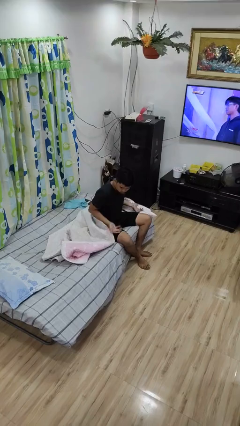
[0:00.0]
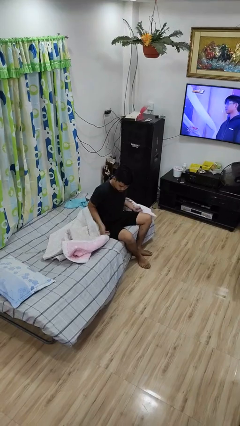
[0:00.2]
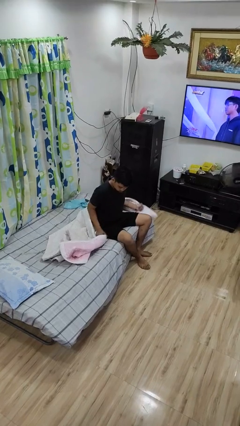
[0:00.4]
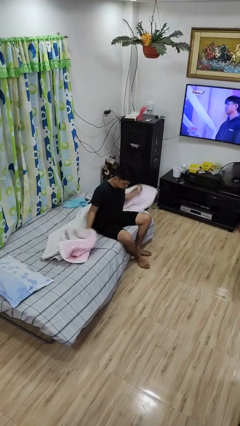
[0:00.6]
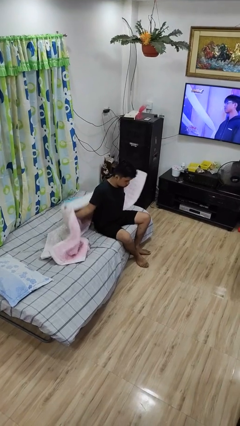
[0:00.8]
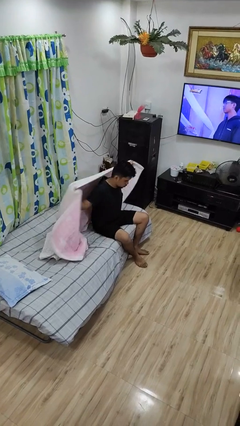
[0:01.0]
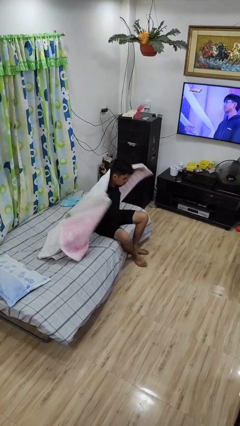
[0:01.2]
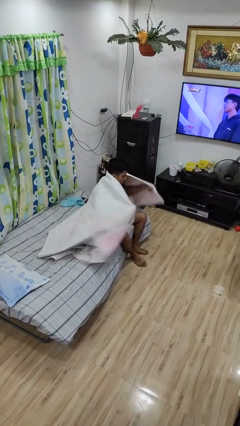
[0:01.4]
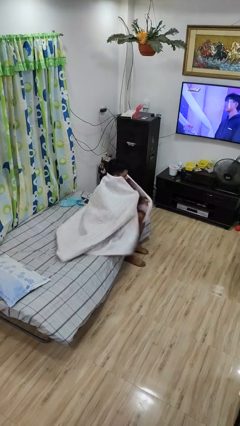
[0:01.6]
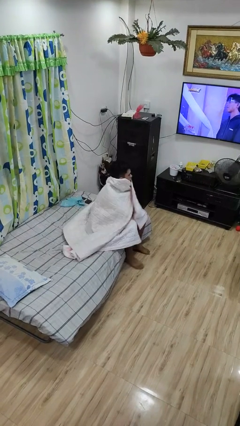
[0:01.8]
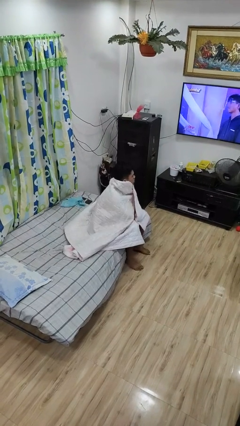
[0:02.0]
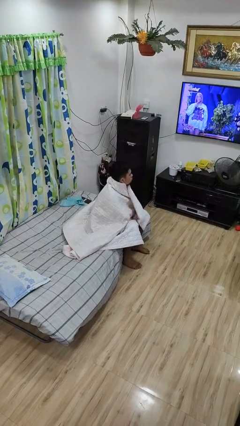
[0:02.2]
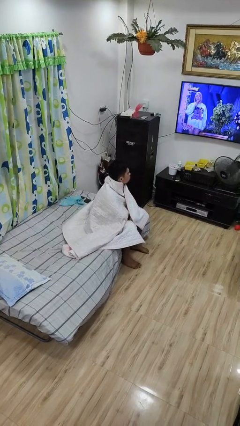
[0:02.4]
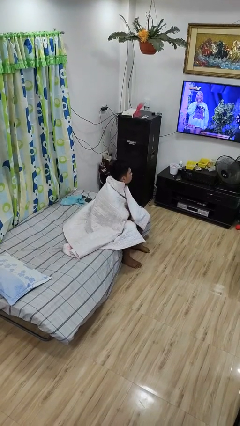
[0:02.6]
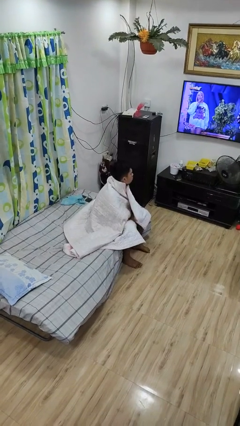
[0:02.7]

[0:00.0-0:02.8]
person covers with bedsheets

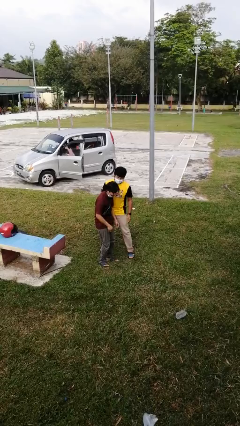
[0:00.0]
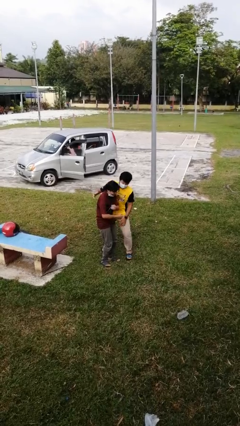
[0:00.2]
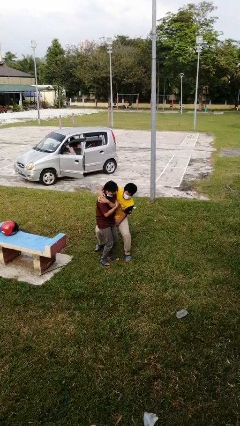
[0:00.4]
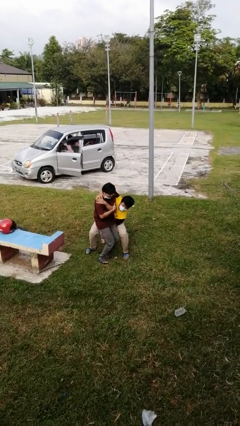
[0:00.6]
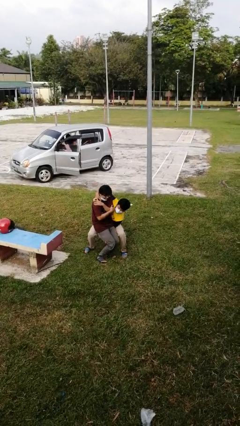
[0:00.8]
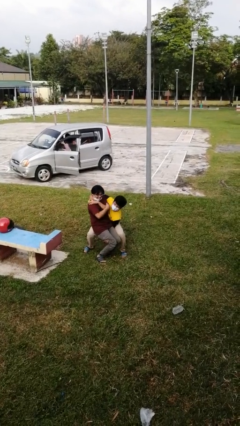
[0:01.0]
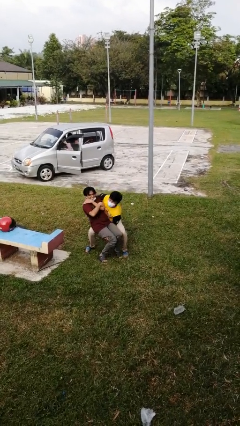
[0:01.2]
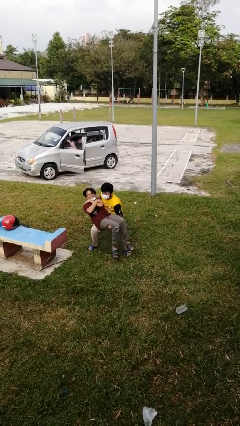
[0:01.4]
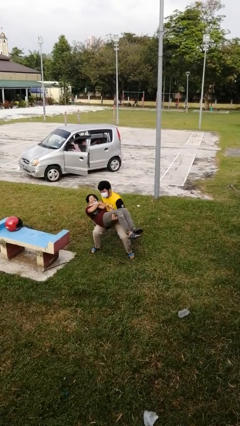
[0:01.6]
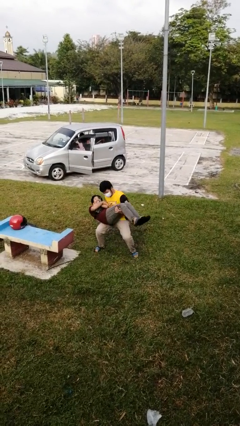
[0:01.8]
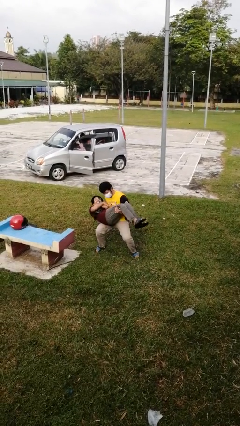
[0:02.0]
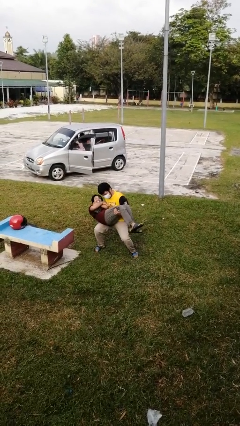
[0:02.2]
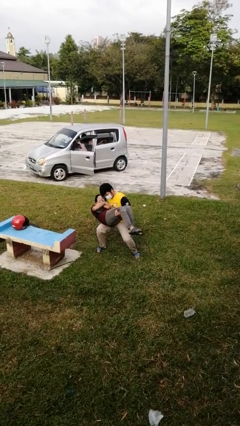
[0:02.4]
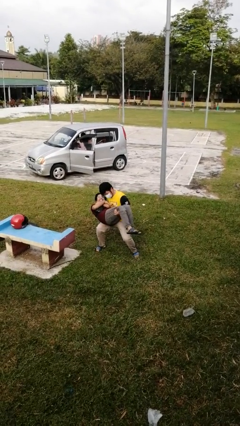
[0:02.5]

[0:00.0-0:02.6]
person picks up person

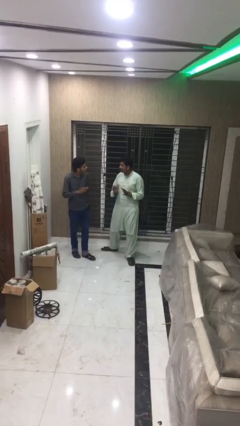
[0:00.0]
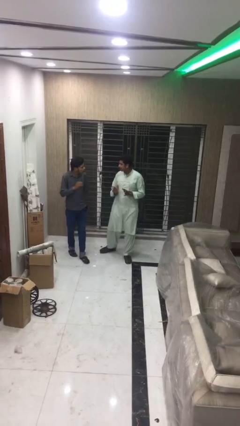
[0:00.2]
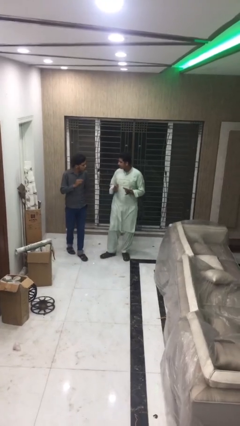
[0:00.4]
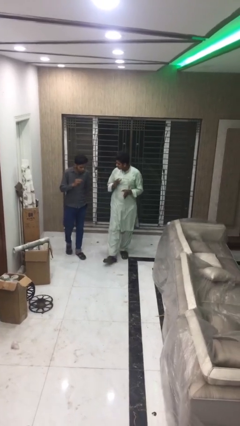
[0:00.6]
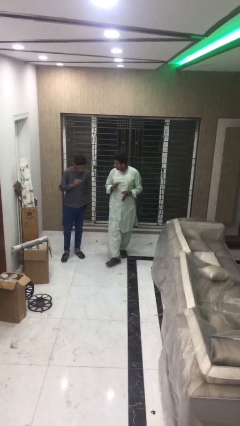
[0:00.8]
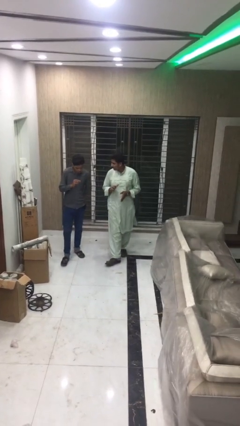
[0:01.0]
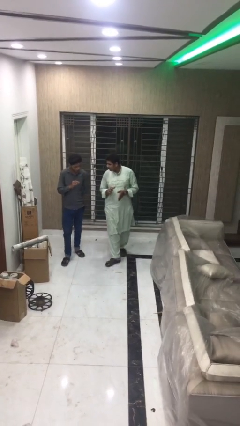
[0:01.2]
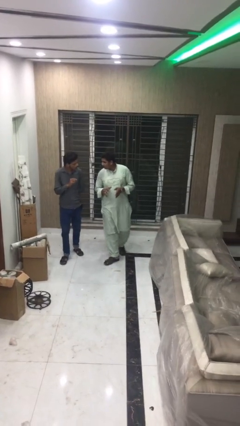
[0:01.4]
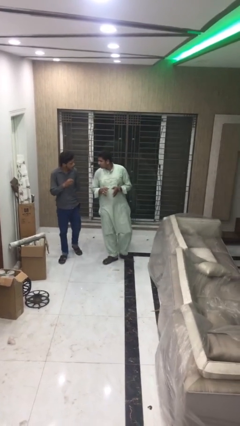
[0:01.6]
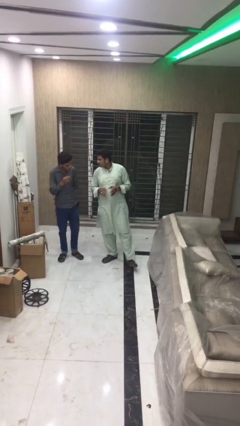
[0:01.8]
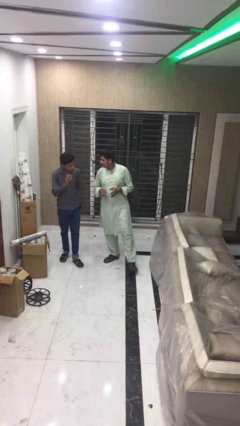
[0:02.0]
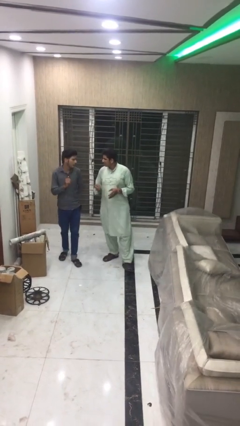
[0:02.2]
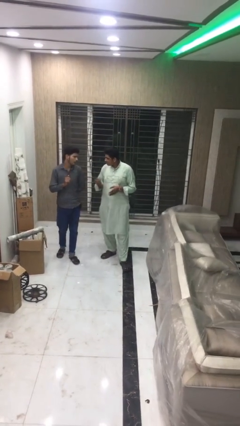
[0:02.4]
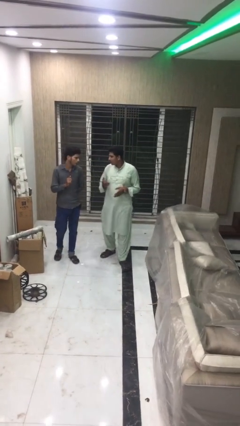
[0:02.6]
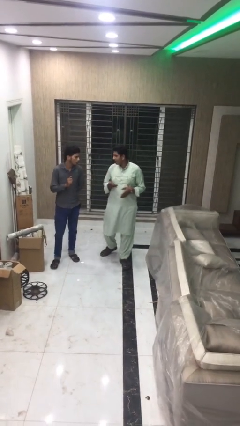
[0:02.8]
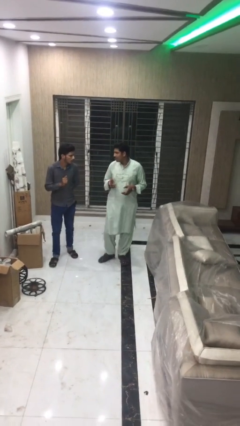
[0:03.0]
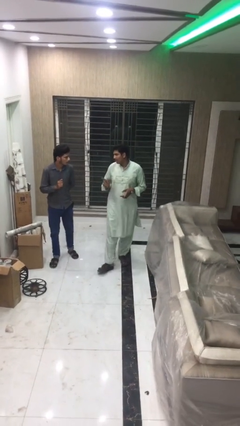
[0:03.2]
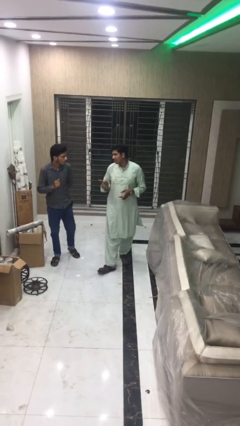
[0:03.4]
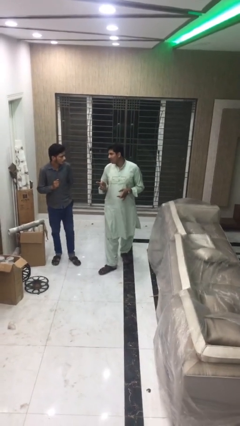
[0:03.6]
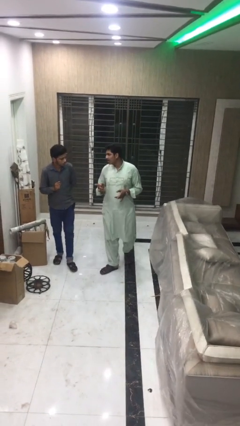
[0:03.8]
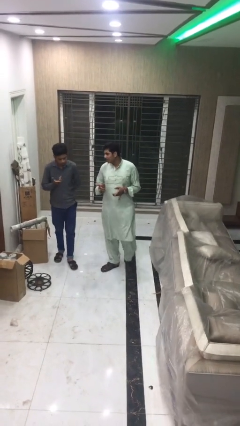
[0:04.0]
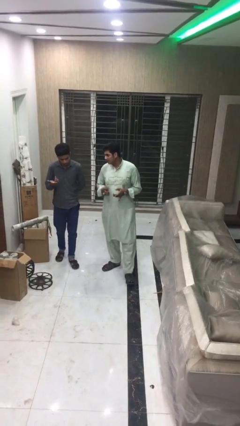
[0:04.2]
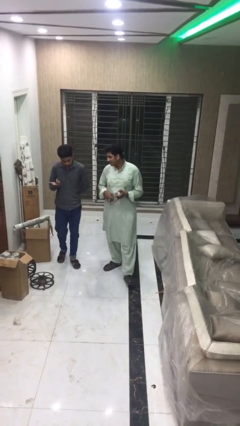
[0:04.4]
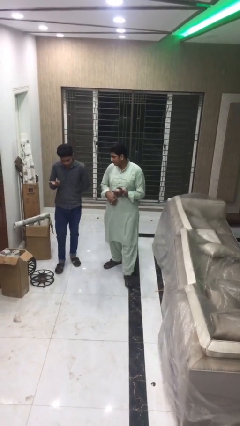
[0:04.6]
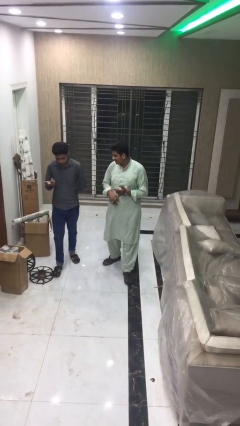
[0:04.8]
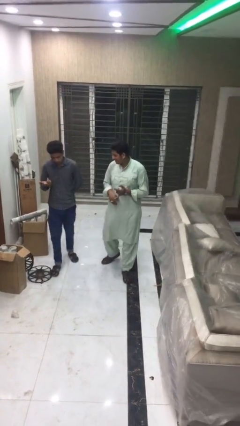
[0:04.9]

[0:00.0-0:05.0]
person talks to person

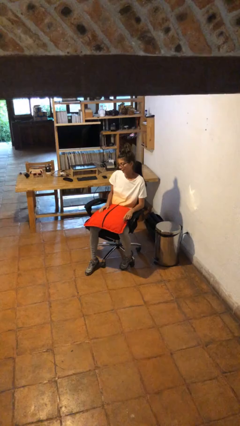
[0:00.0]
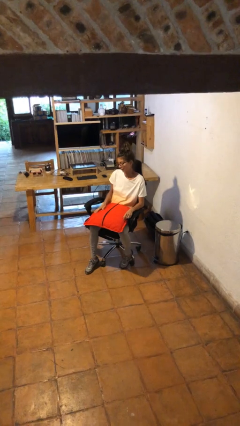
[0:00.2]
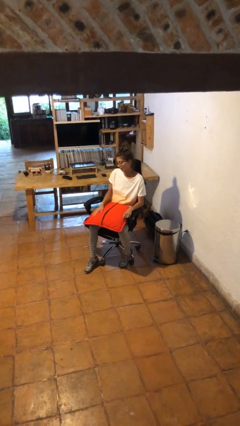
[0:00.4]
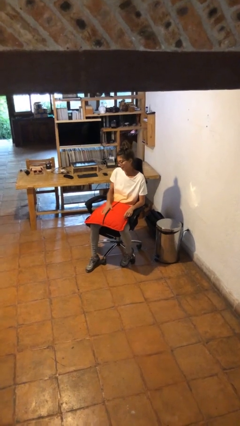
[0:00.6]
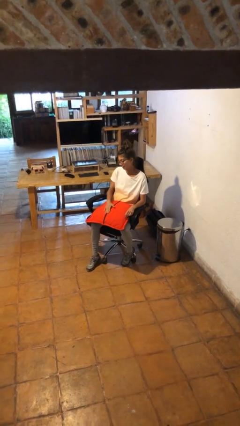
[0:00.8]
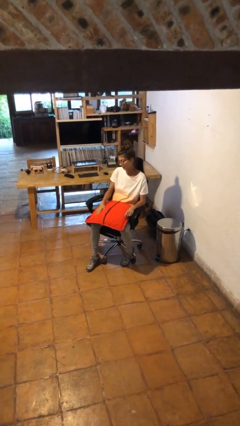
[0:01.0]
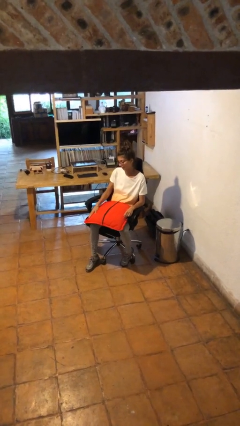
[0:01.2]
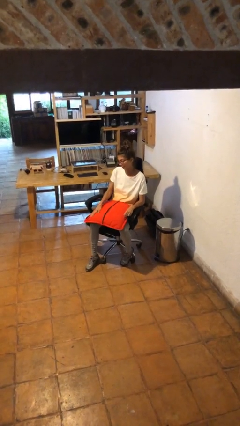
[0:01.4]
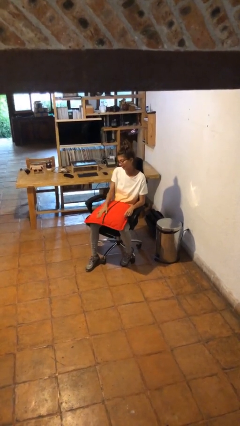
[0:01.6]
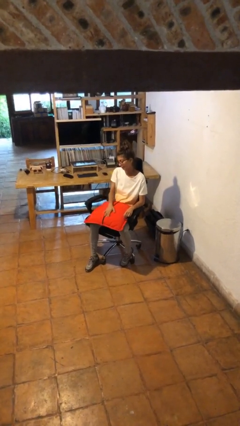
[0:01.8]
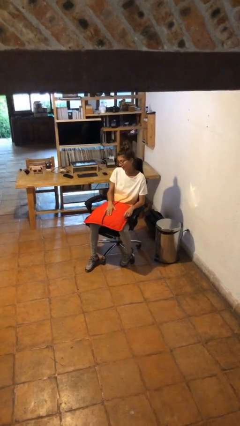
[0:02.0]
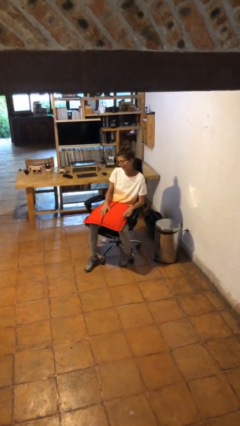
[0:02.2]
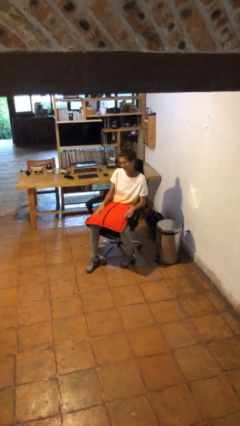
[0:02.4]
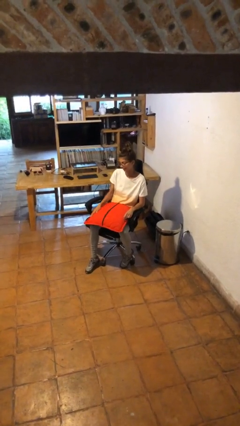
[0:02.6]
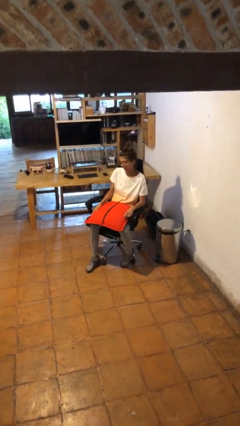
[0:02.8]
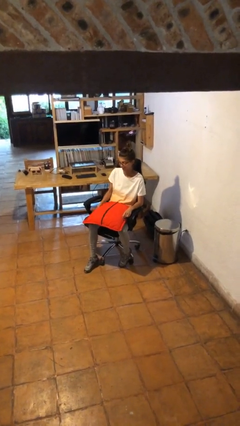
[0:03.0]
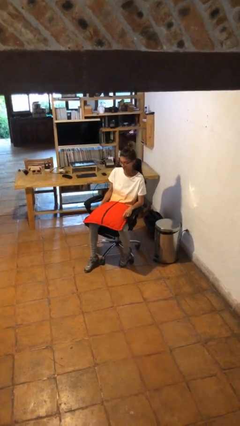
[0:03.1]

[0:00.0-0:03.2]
person waves hand over object

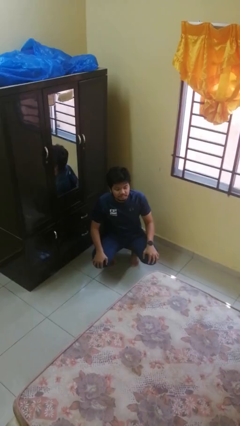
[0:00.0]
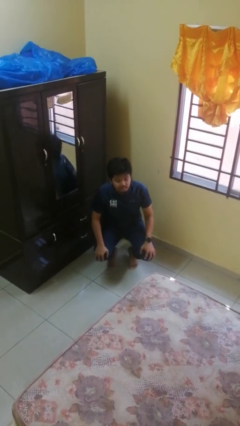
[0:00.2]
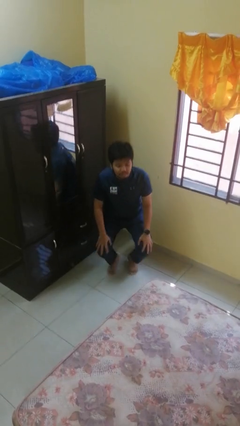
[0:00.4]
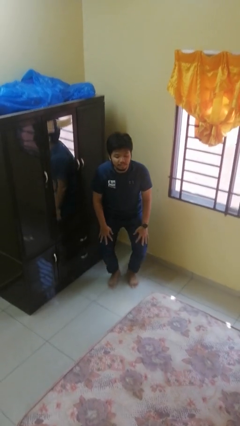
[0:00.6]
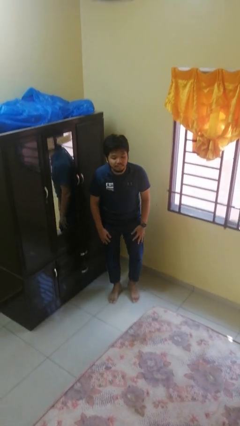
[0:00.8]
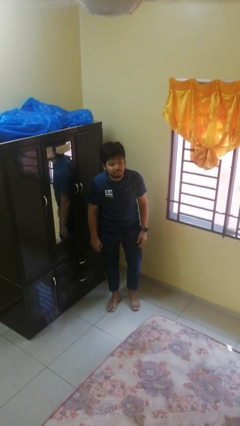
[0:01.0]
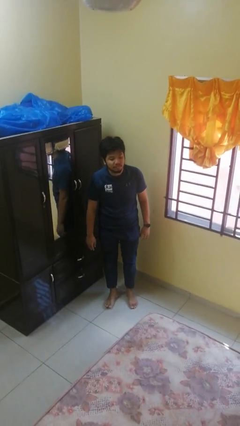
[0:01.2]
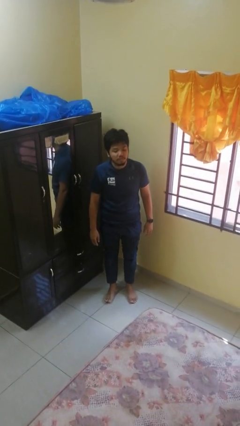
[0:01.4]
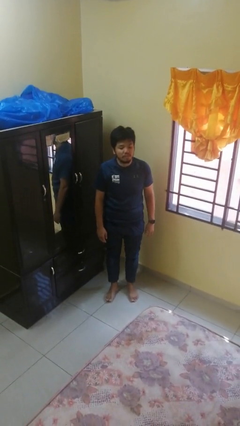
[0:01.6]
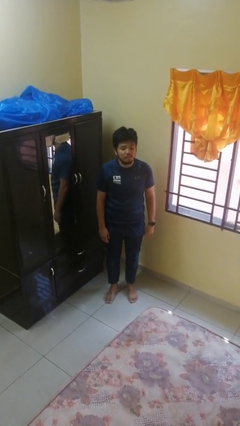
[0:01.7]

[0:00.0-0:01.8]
person stands up

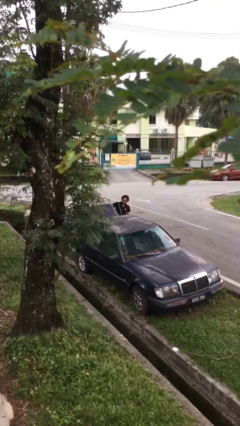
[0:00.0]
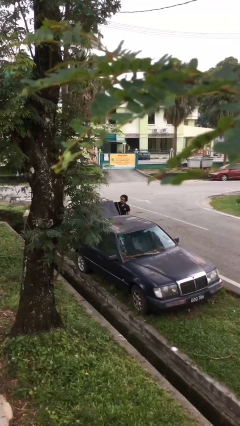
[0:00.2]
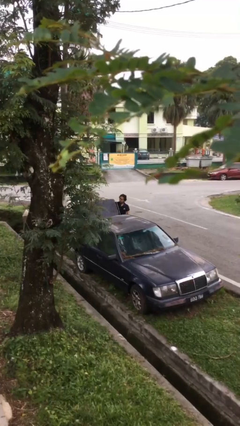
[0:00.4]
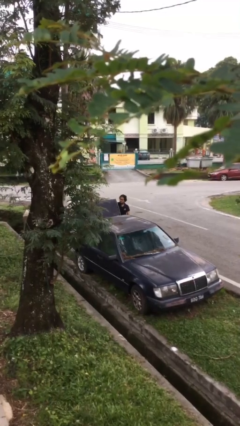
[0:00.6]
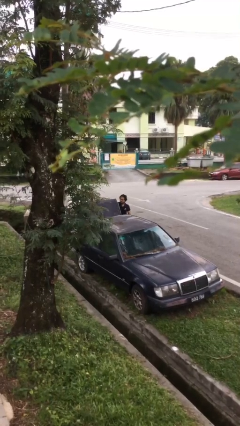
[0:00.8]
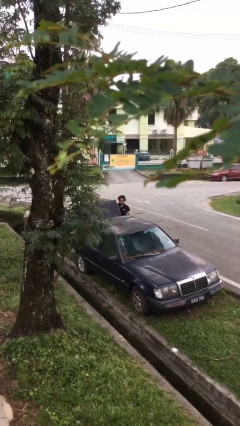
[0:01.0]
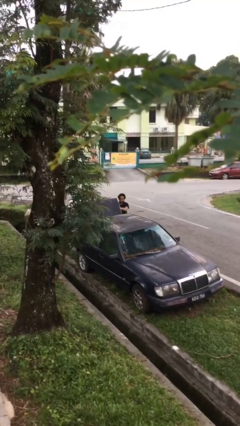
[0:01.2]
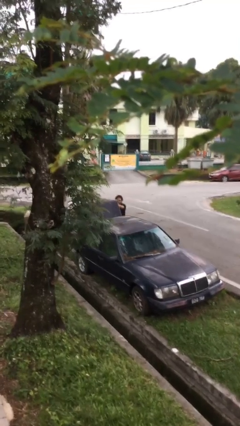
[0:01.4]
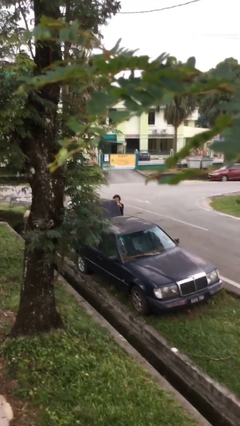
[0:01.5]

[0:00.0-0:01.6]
person opens car trunk

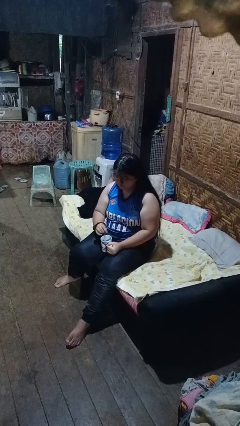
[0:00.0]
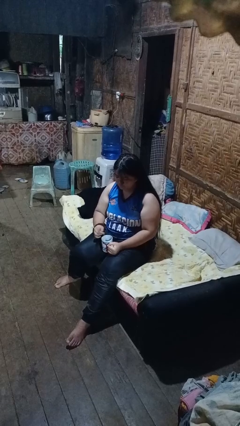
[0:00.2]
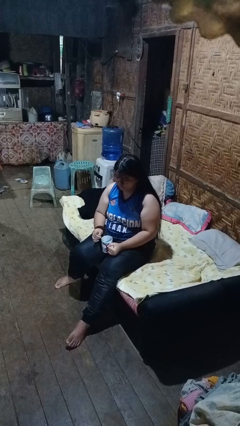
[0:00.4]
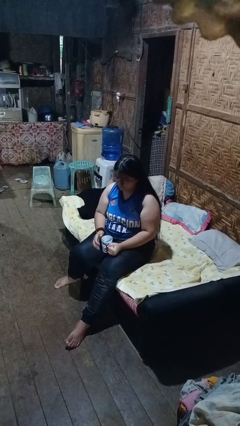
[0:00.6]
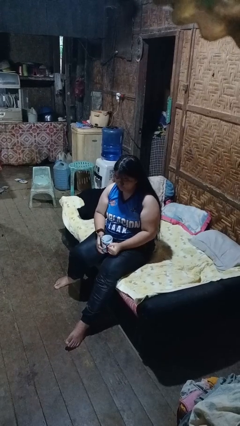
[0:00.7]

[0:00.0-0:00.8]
person stirs mug
